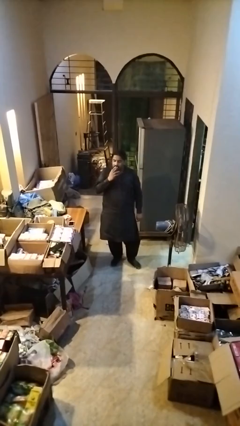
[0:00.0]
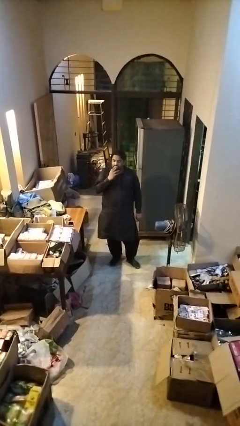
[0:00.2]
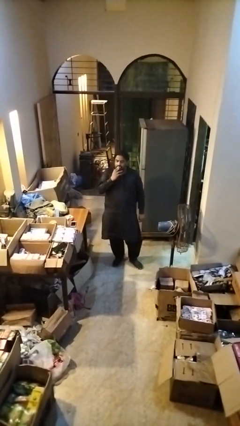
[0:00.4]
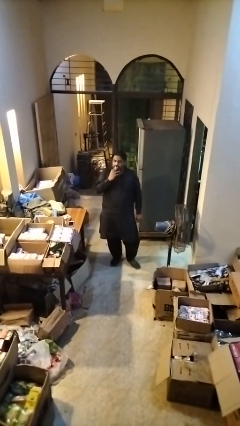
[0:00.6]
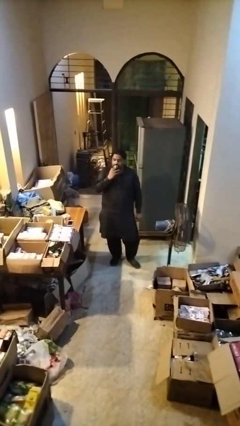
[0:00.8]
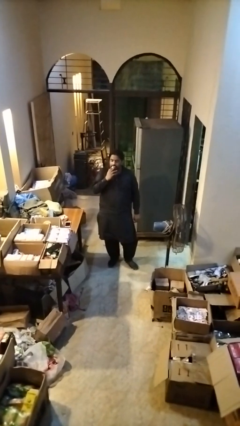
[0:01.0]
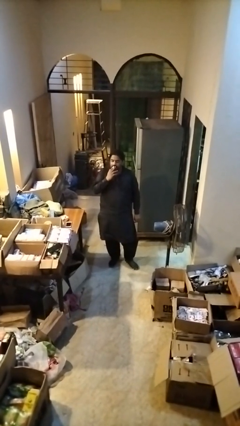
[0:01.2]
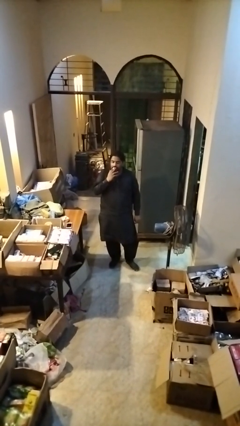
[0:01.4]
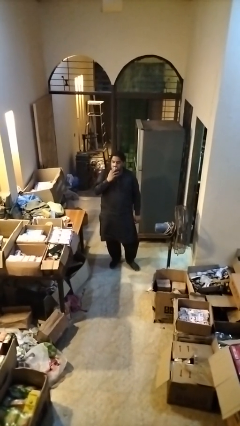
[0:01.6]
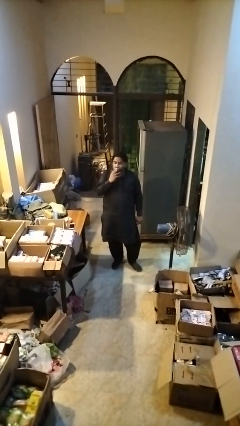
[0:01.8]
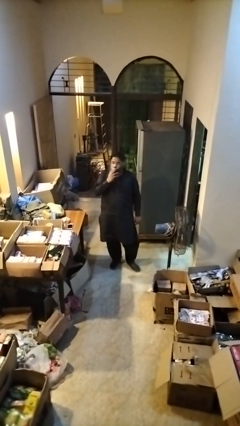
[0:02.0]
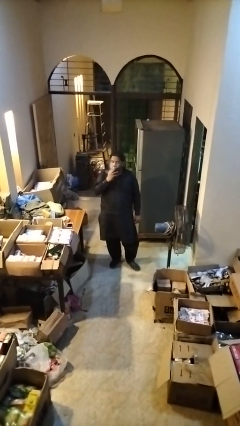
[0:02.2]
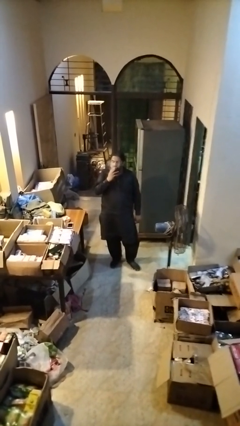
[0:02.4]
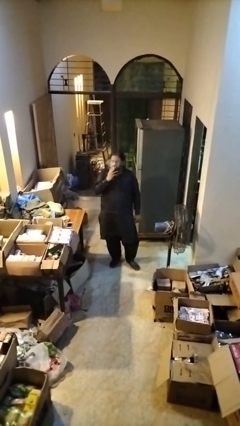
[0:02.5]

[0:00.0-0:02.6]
person vapes

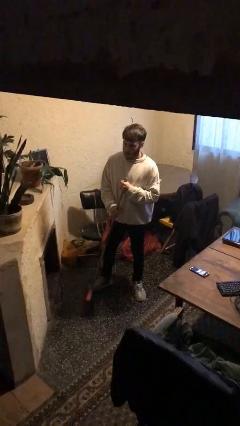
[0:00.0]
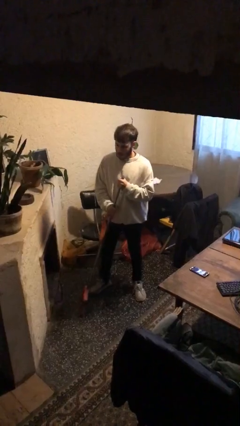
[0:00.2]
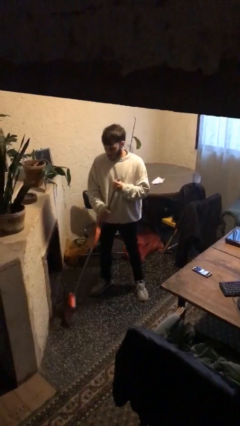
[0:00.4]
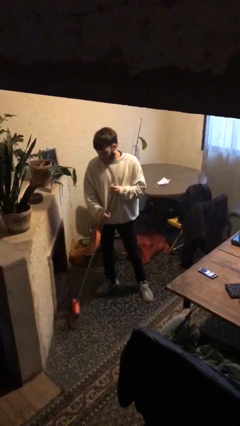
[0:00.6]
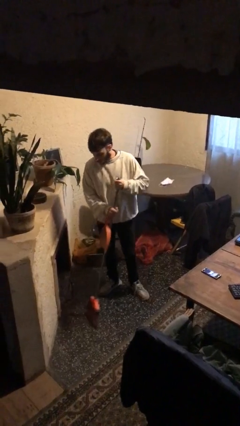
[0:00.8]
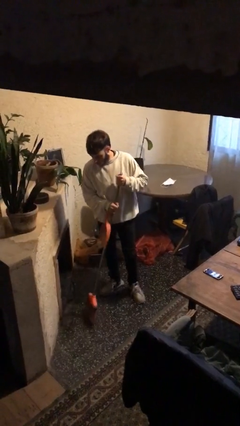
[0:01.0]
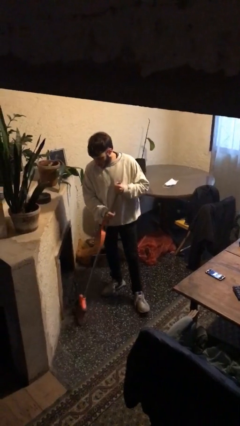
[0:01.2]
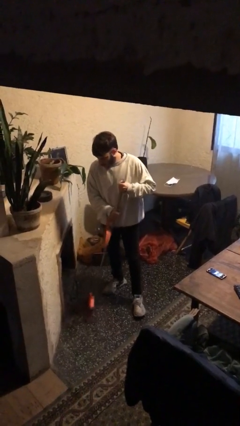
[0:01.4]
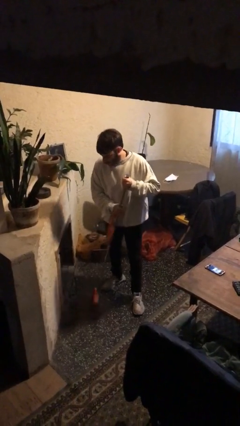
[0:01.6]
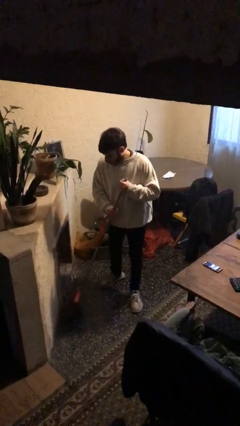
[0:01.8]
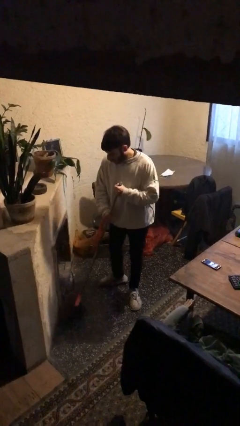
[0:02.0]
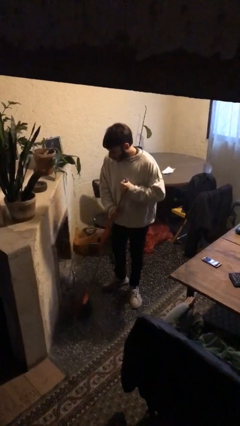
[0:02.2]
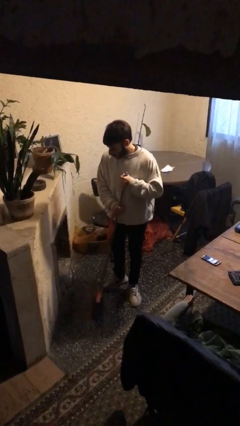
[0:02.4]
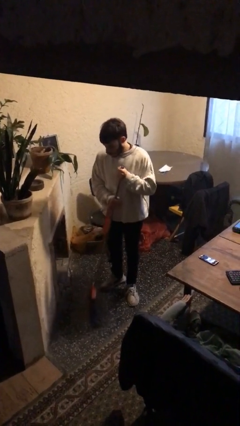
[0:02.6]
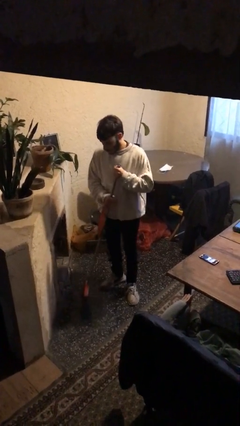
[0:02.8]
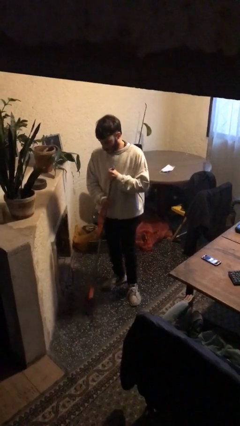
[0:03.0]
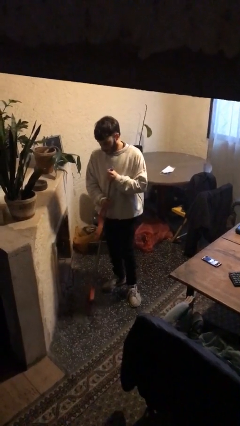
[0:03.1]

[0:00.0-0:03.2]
person sweeps floor

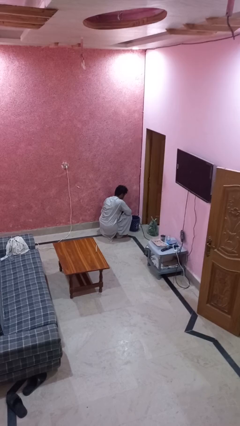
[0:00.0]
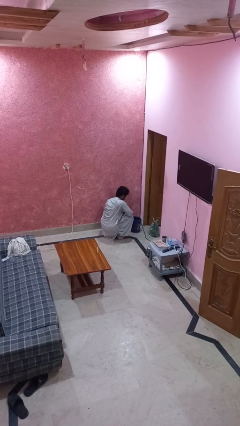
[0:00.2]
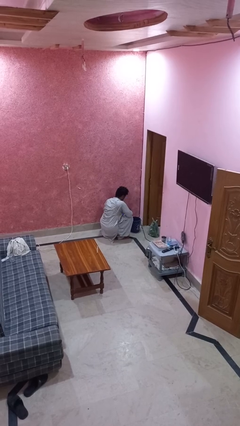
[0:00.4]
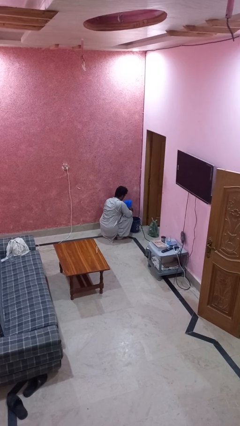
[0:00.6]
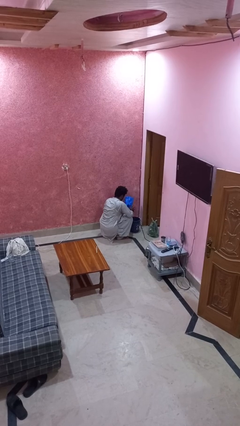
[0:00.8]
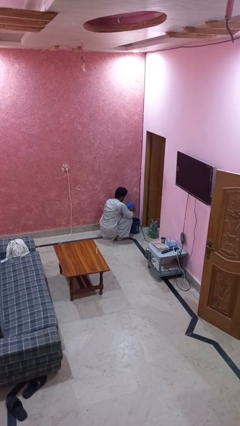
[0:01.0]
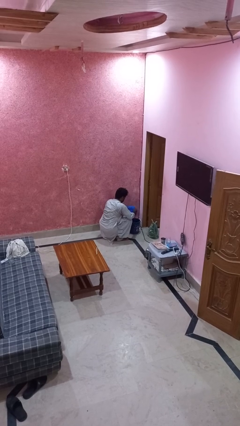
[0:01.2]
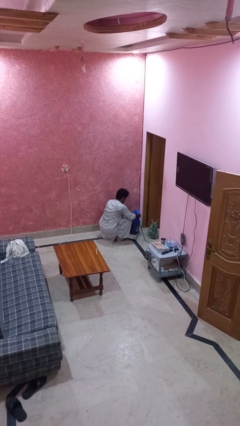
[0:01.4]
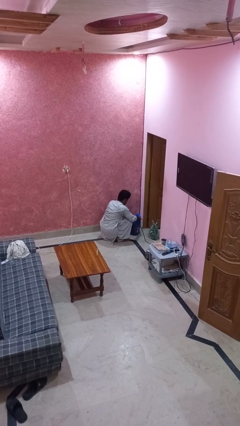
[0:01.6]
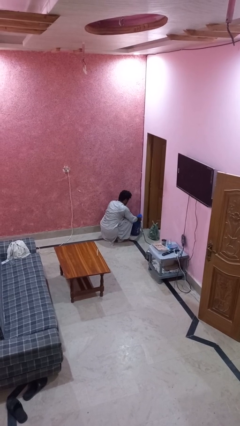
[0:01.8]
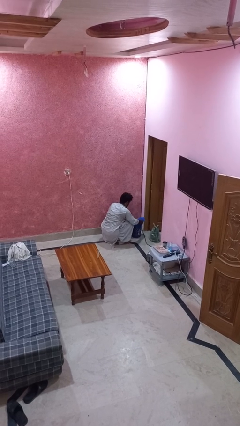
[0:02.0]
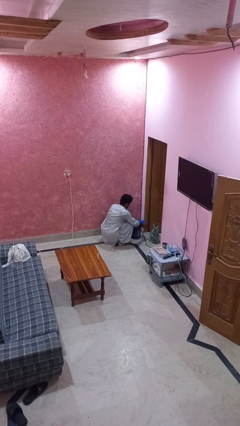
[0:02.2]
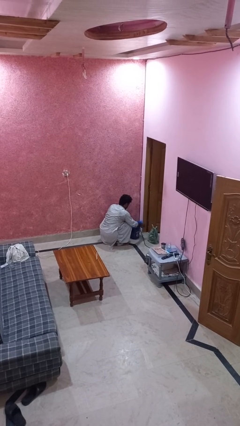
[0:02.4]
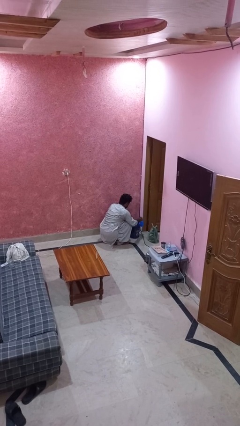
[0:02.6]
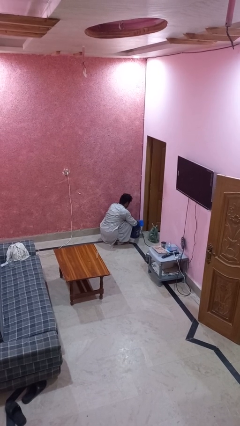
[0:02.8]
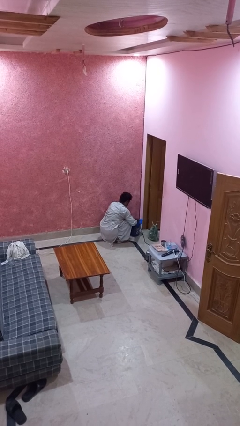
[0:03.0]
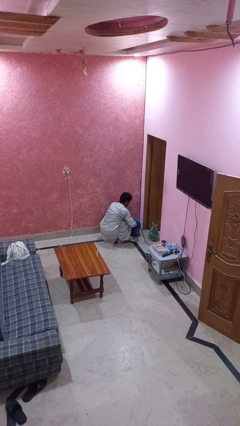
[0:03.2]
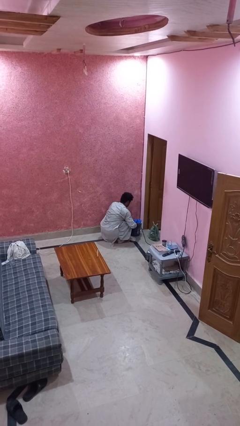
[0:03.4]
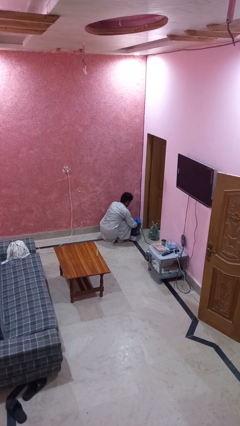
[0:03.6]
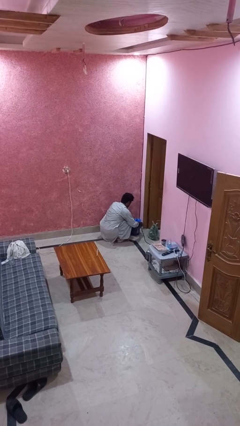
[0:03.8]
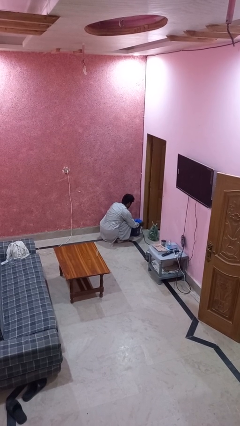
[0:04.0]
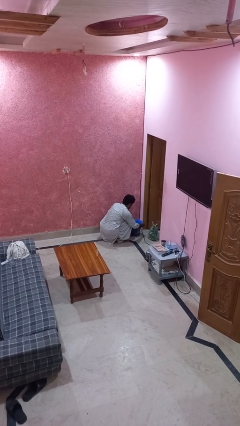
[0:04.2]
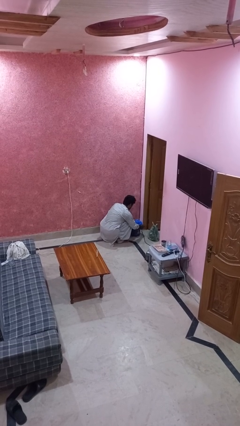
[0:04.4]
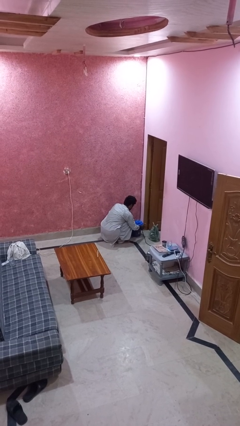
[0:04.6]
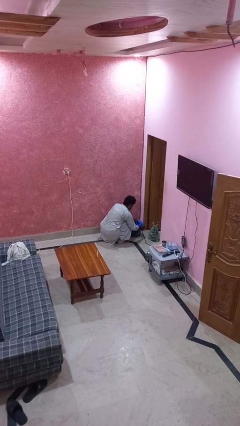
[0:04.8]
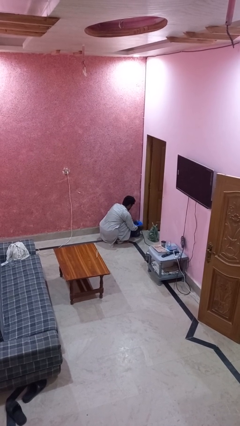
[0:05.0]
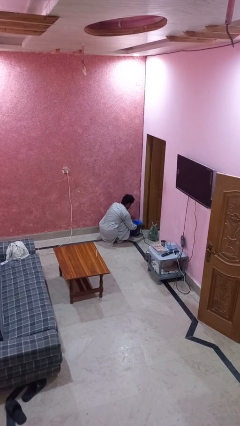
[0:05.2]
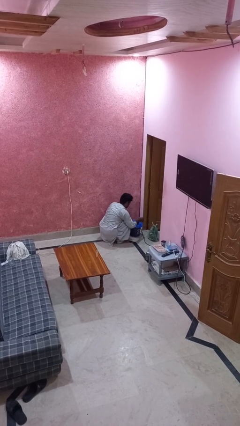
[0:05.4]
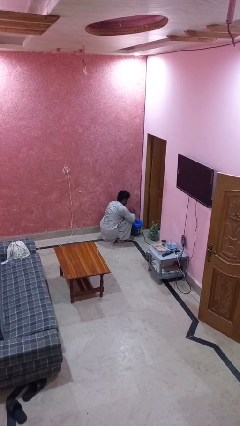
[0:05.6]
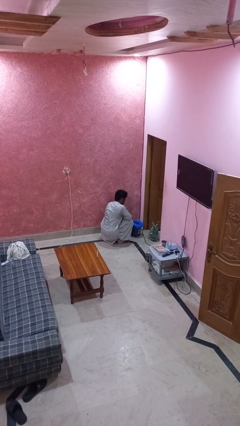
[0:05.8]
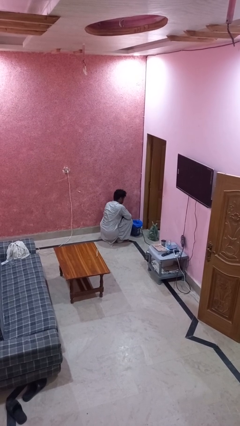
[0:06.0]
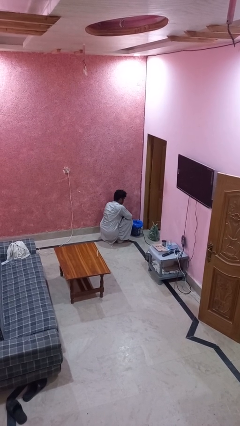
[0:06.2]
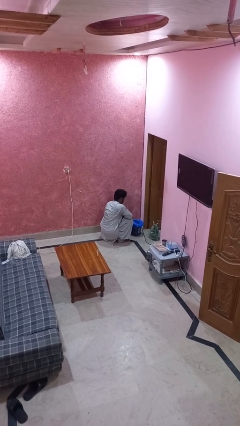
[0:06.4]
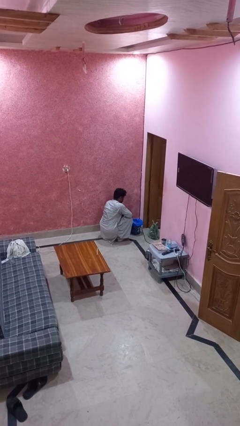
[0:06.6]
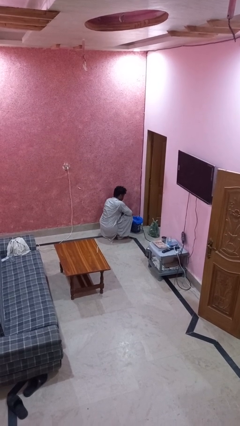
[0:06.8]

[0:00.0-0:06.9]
person inserts trashbag into trashcan

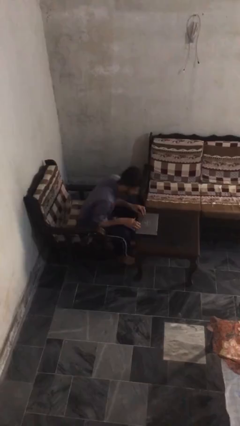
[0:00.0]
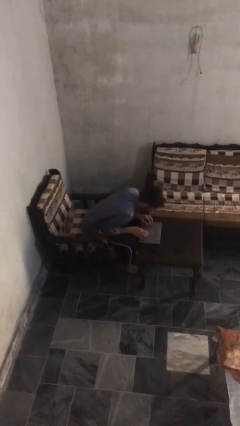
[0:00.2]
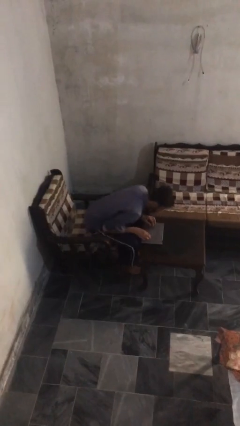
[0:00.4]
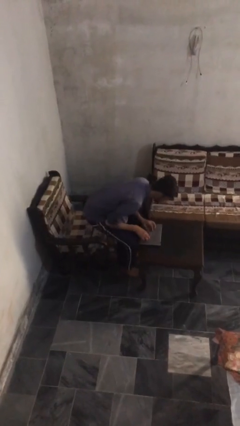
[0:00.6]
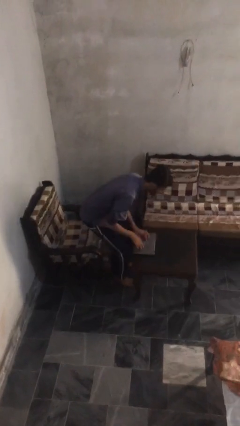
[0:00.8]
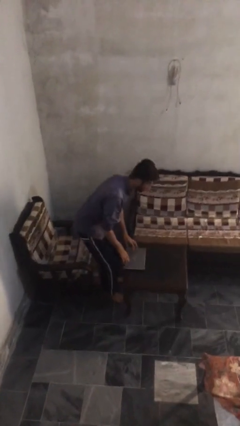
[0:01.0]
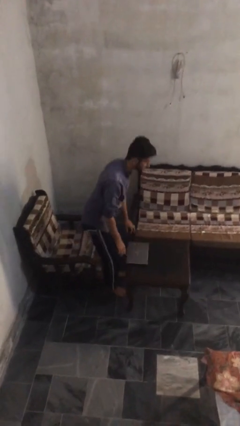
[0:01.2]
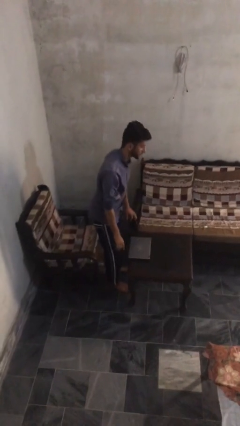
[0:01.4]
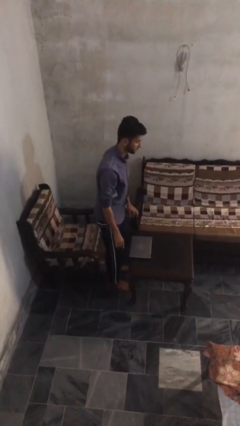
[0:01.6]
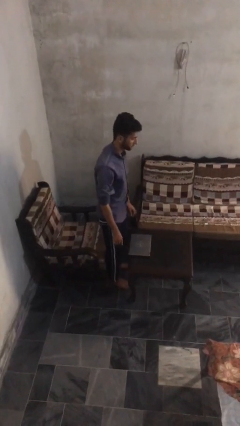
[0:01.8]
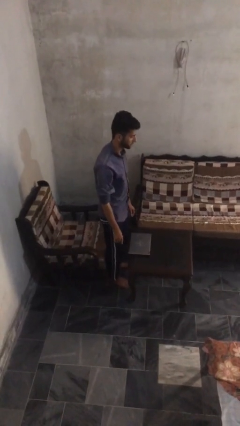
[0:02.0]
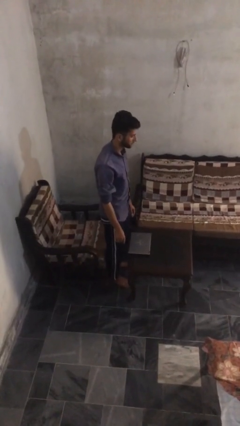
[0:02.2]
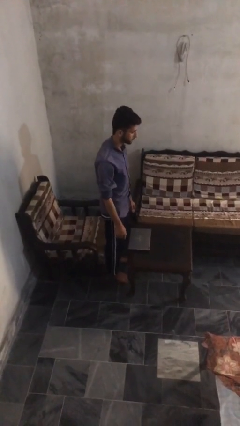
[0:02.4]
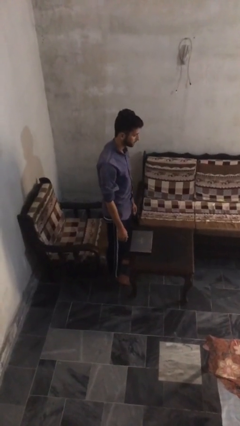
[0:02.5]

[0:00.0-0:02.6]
person stands up

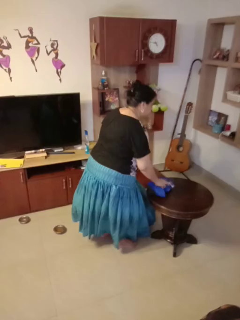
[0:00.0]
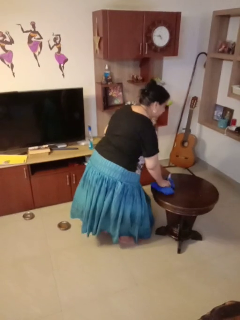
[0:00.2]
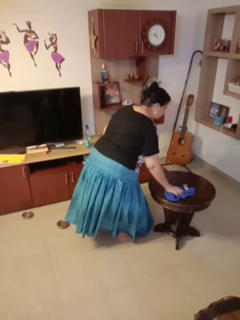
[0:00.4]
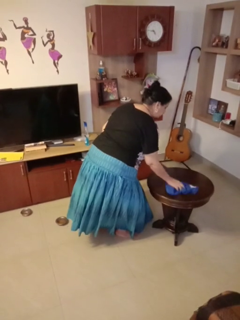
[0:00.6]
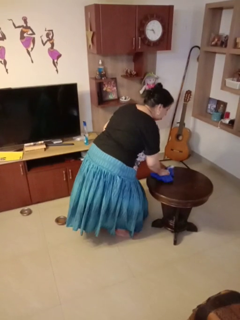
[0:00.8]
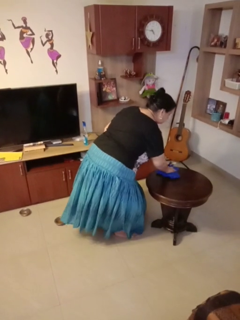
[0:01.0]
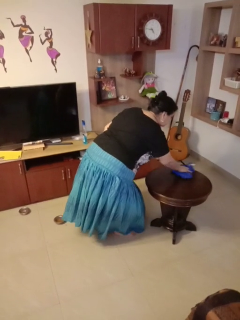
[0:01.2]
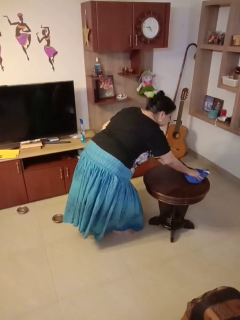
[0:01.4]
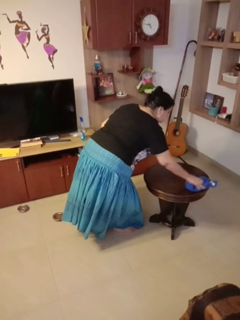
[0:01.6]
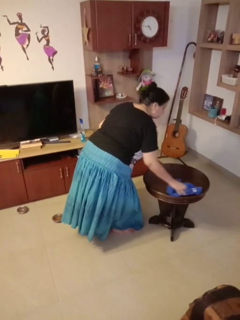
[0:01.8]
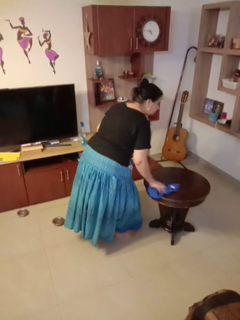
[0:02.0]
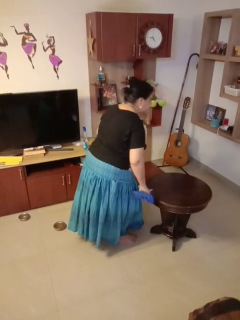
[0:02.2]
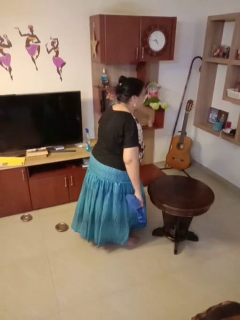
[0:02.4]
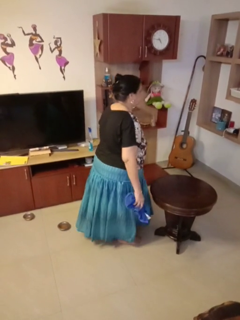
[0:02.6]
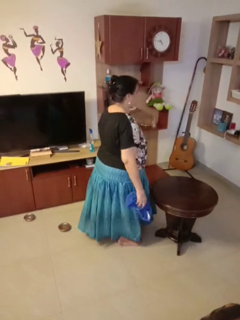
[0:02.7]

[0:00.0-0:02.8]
person cleans table with rag

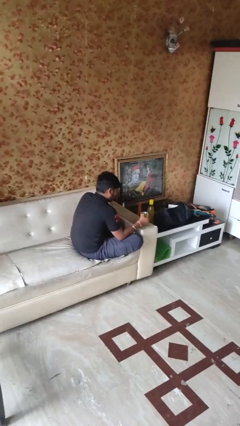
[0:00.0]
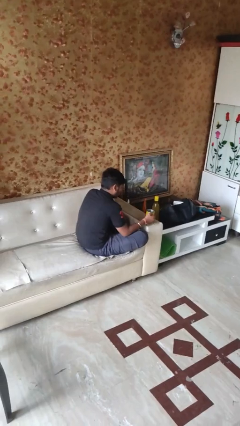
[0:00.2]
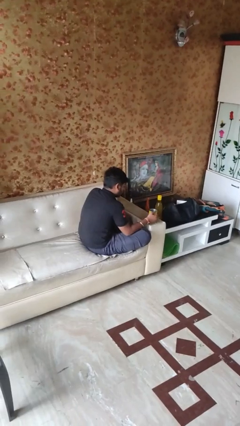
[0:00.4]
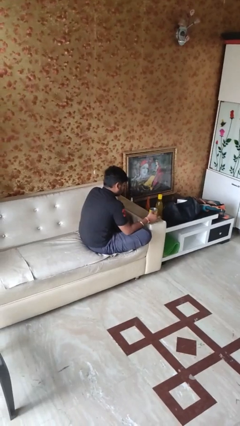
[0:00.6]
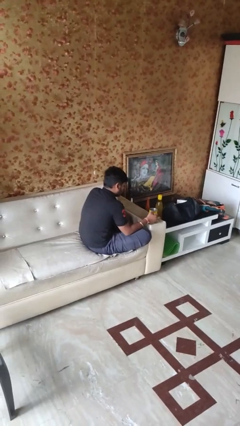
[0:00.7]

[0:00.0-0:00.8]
person puts down object on table
